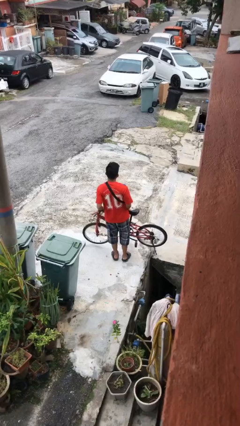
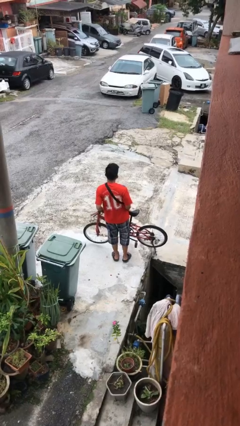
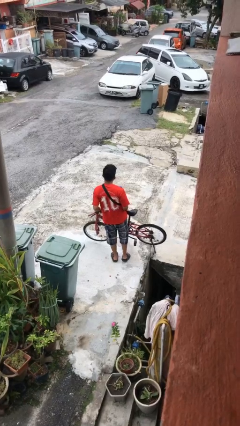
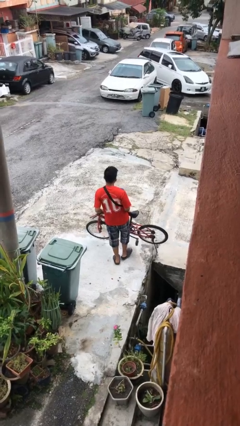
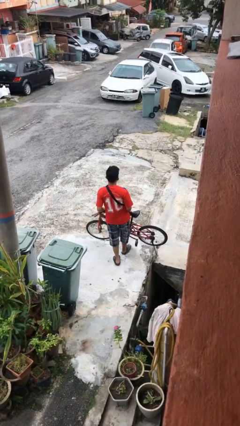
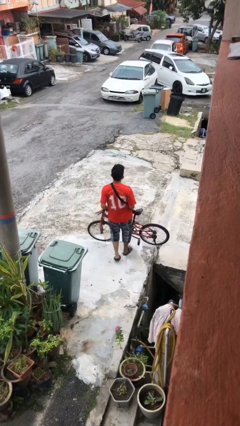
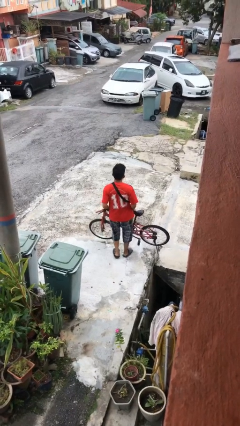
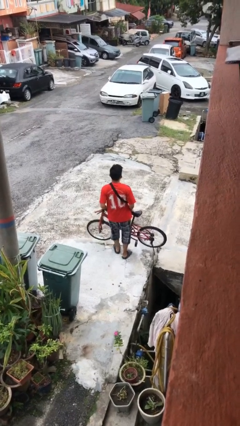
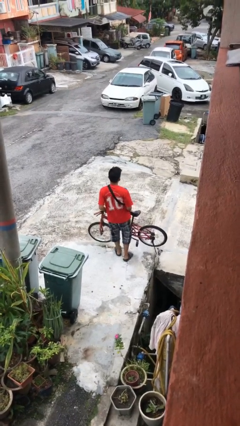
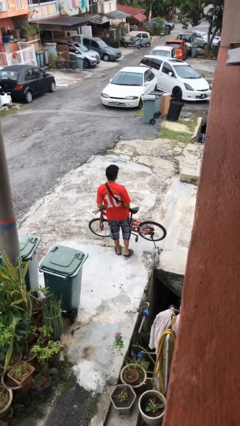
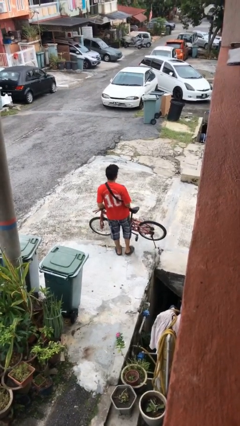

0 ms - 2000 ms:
person carries bicycle

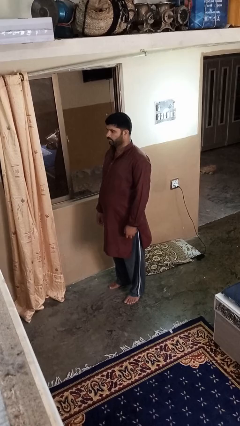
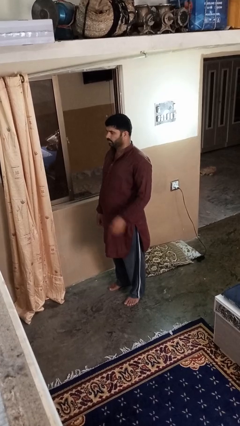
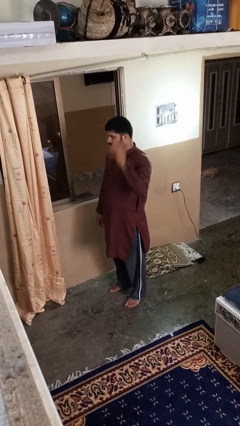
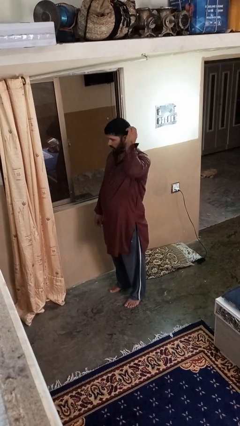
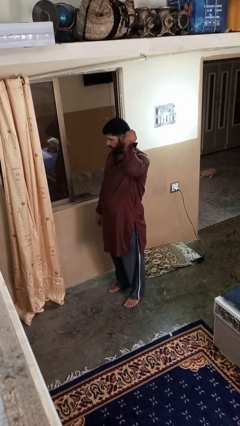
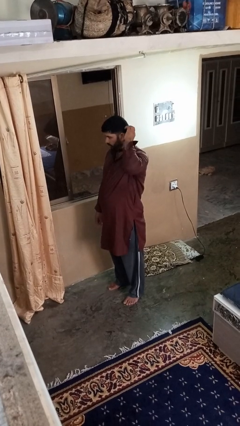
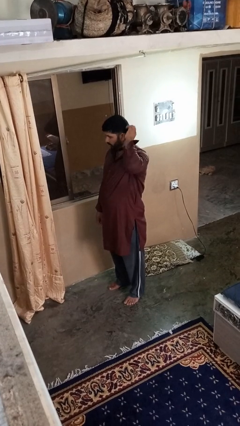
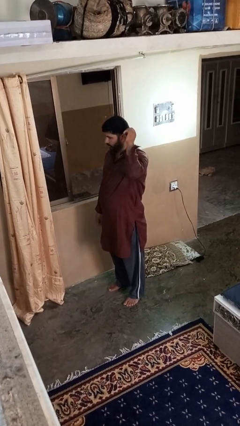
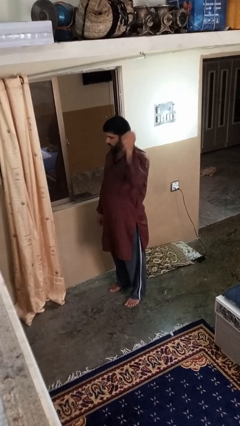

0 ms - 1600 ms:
person strokes hair

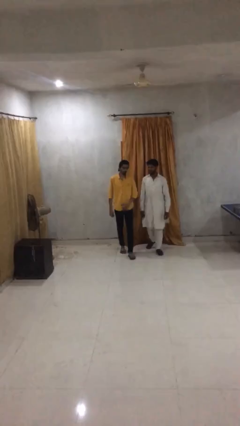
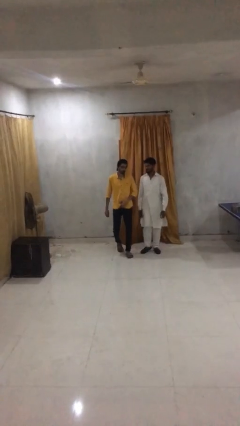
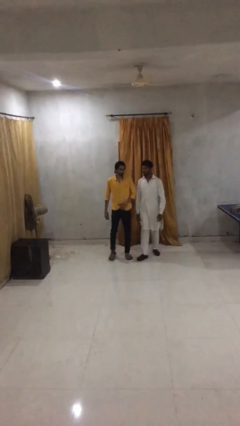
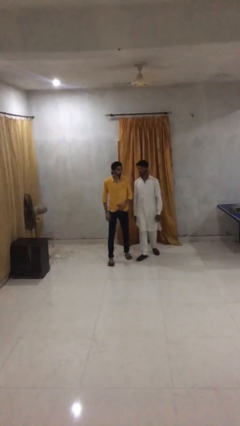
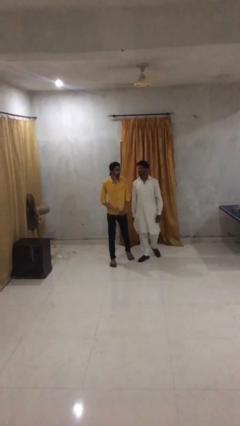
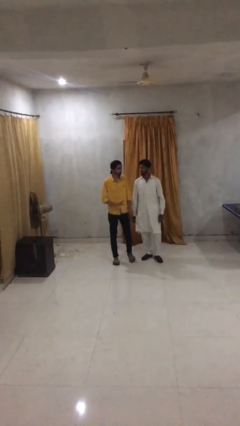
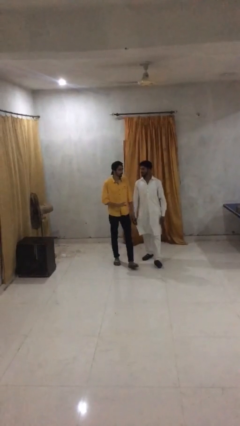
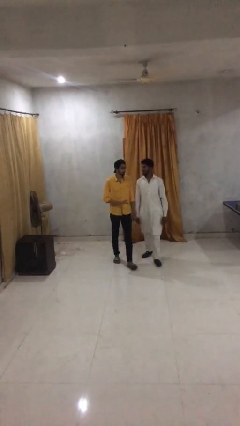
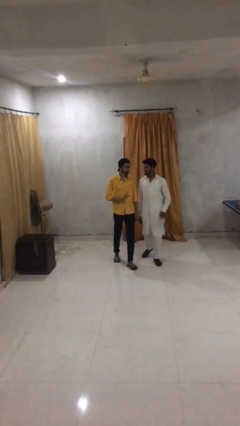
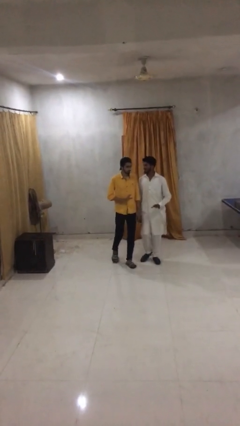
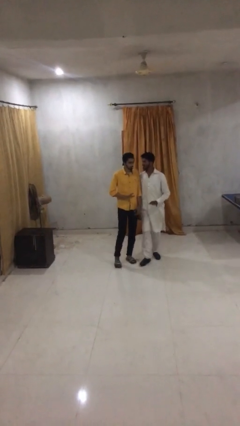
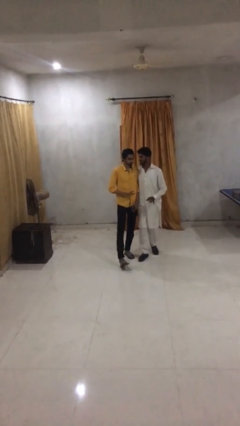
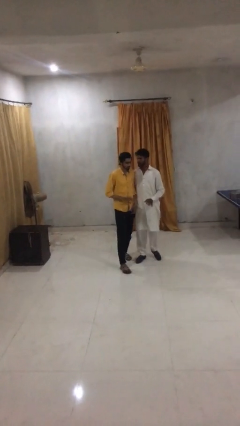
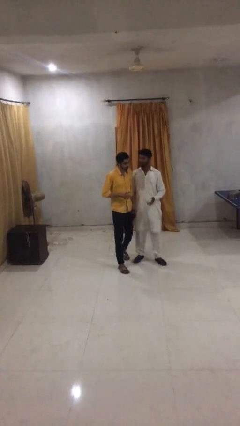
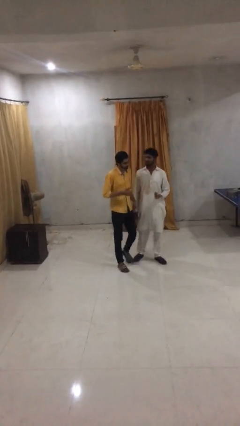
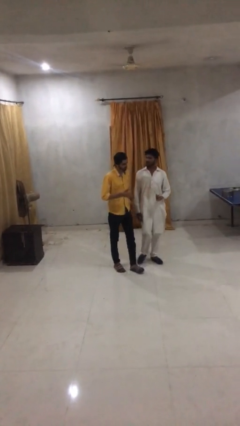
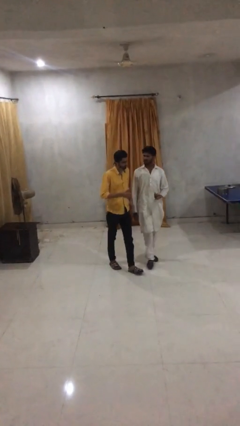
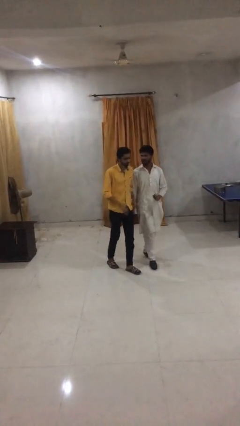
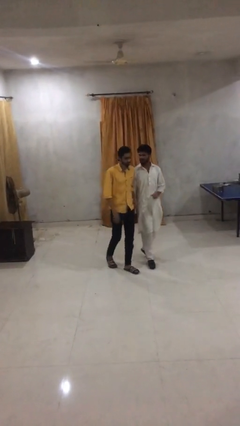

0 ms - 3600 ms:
person talks to person

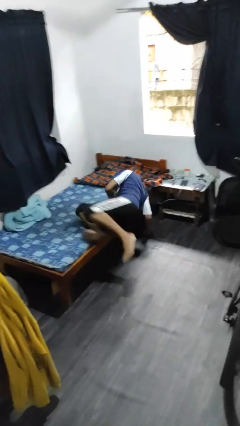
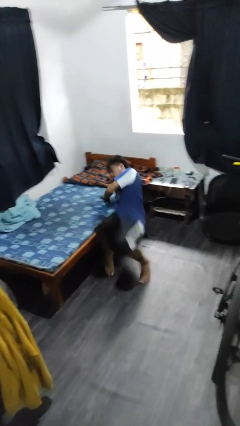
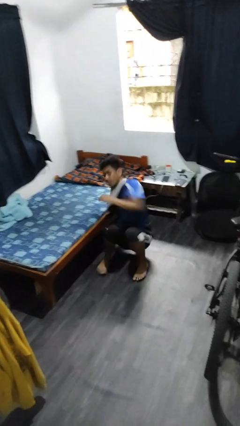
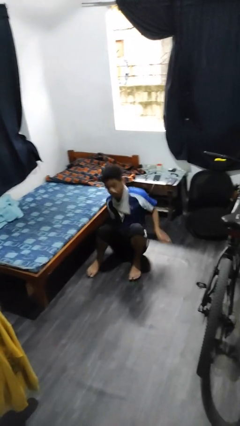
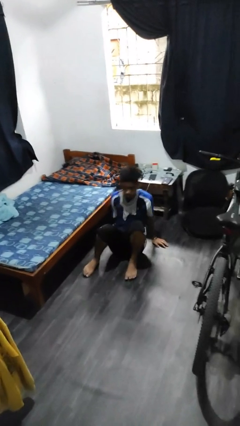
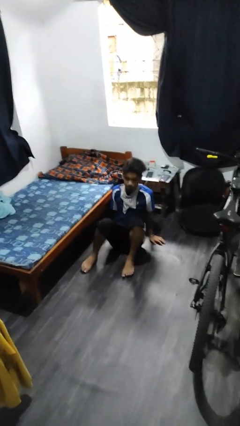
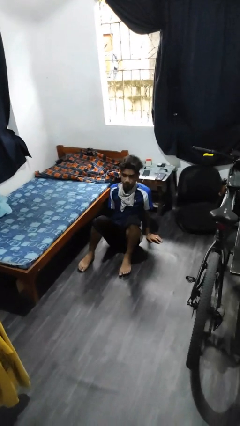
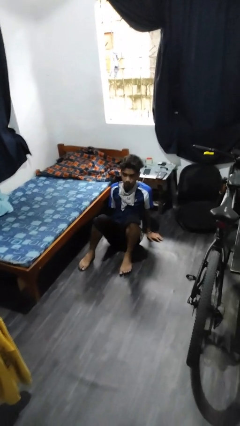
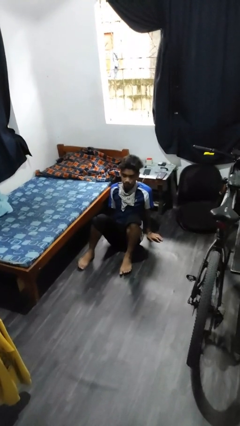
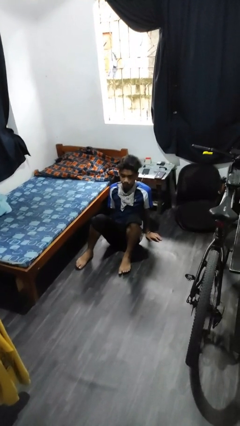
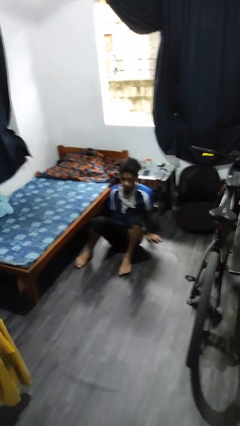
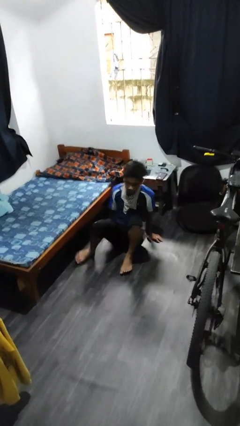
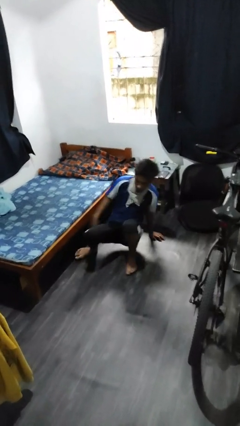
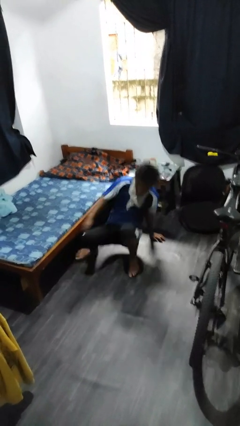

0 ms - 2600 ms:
person falls from bed

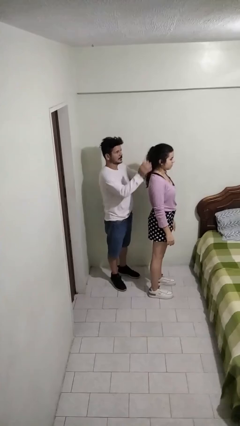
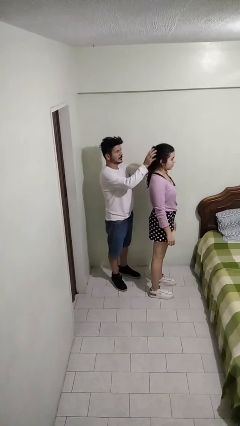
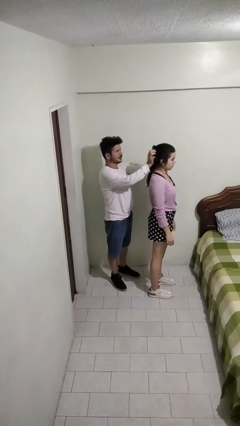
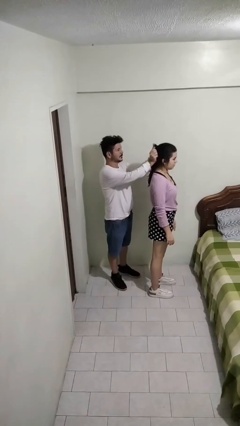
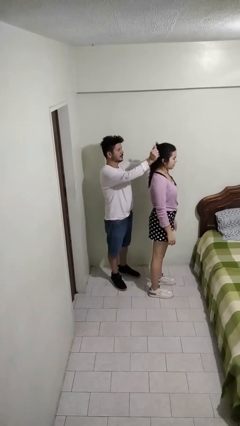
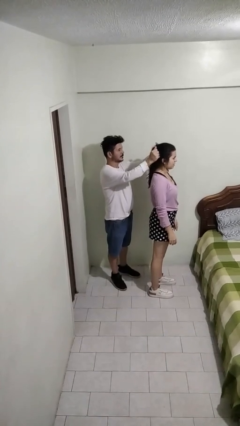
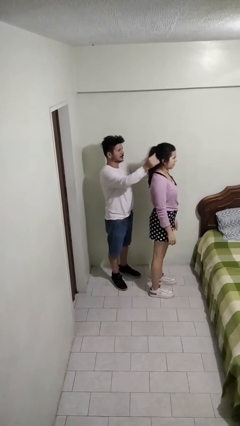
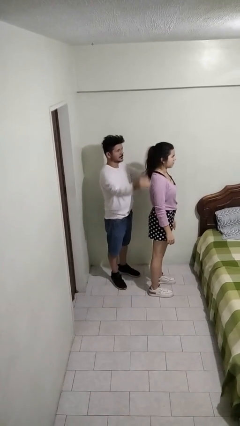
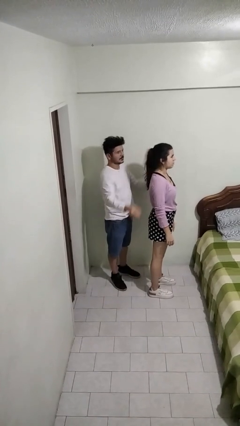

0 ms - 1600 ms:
person grabs person by hair

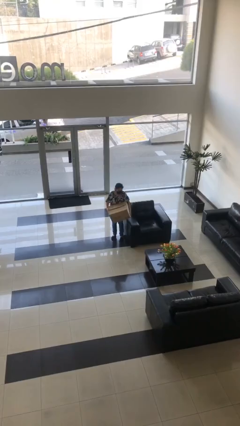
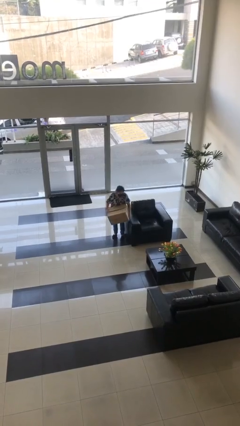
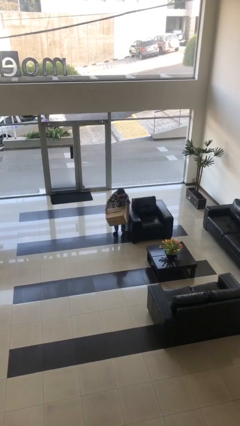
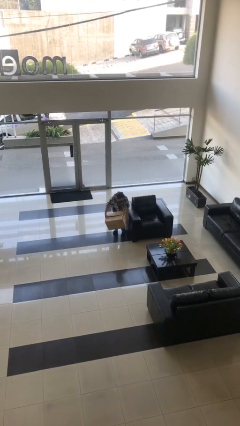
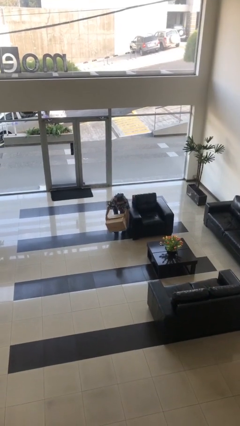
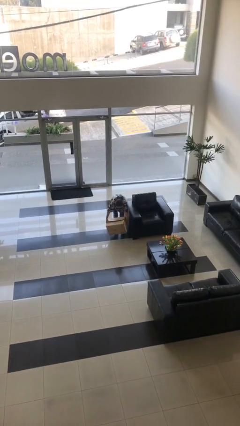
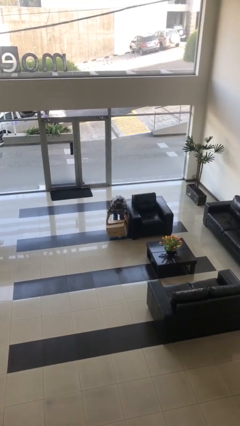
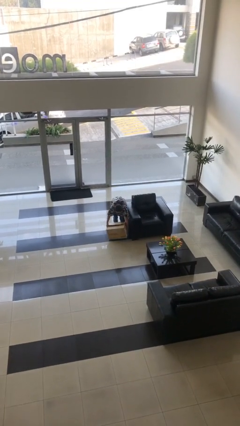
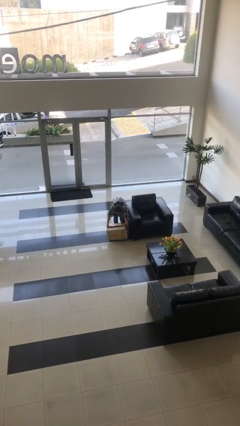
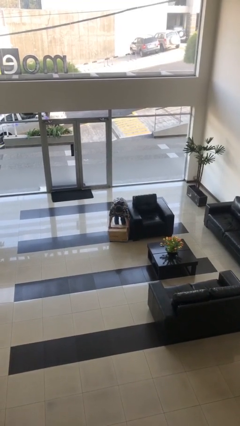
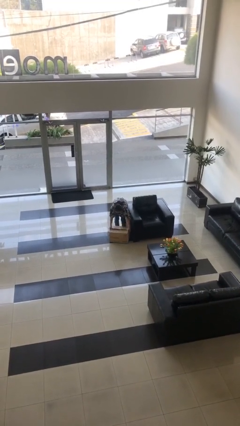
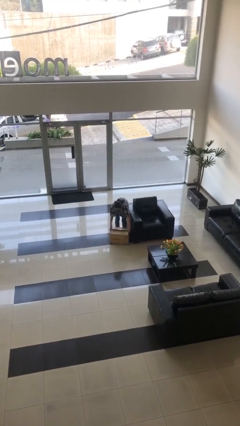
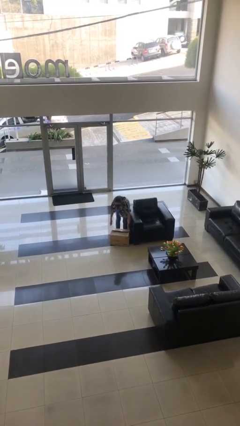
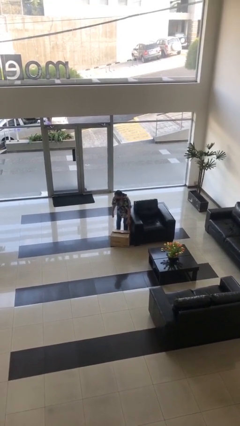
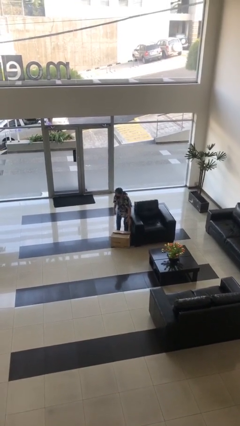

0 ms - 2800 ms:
person puts down object on floor

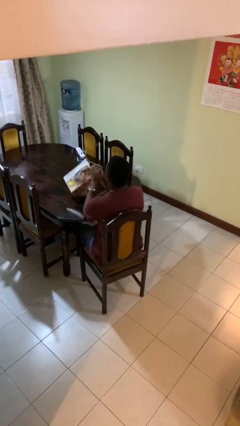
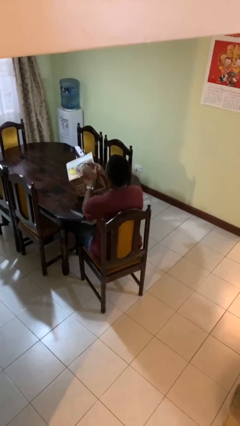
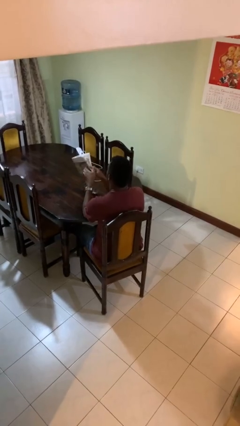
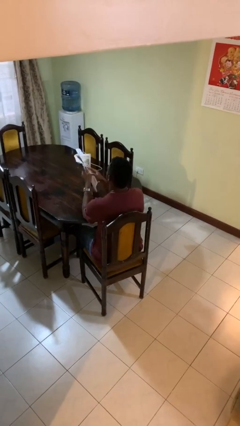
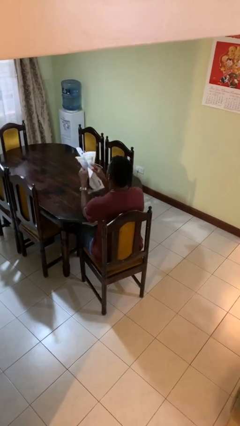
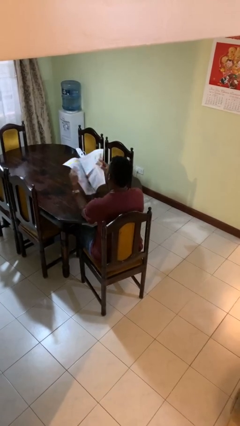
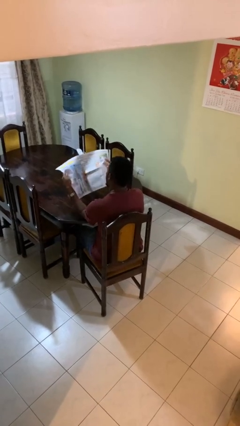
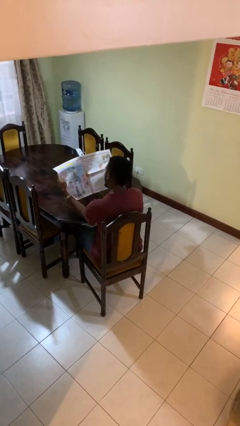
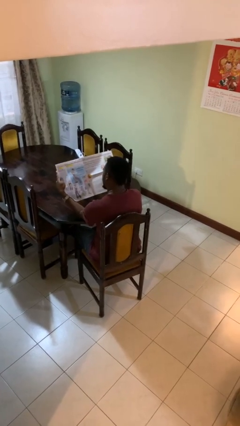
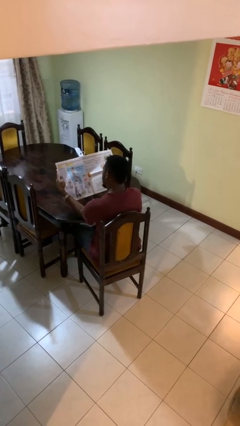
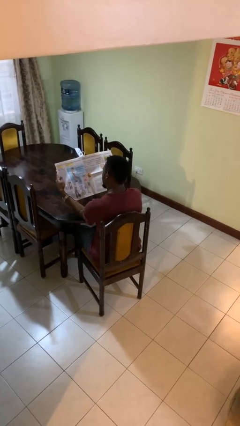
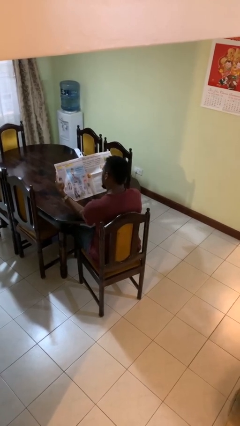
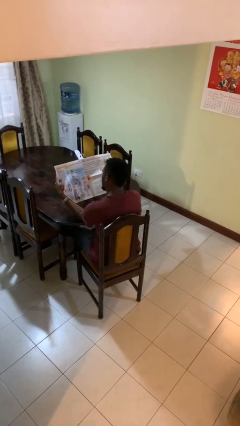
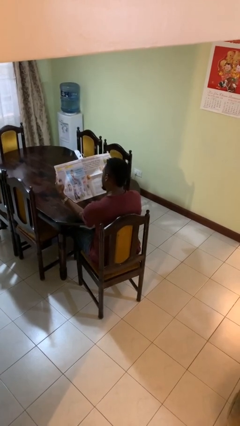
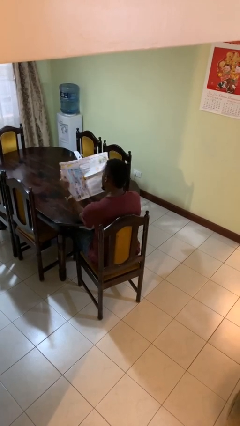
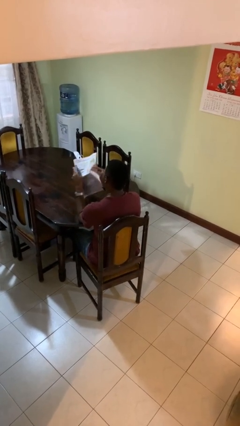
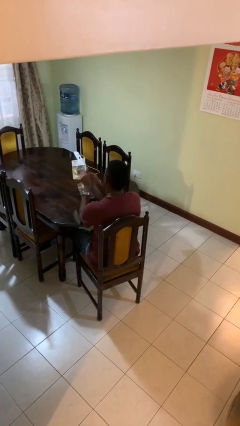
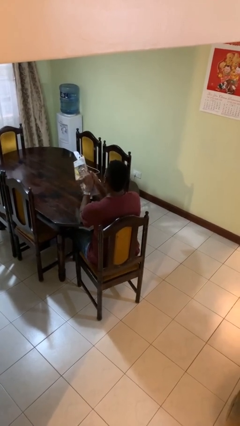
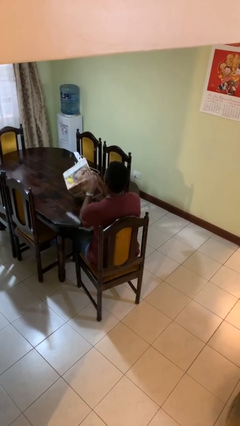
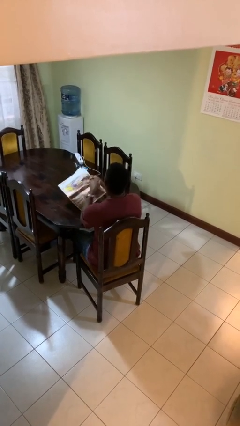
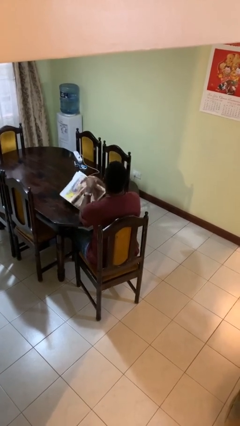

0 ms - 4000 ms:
person reads newspaper
